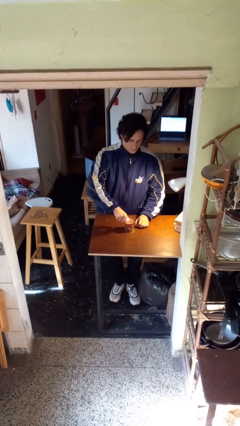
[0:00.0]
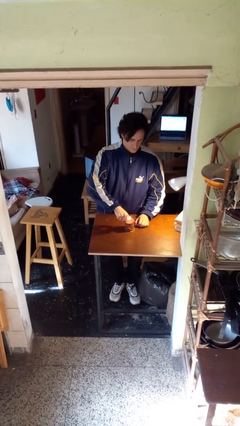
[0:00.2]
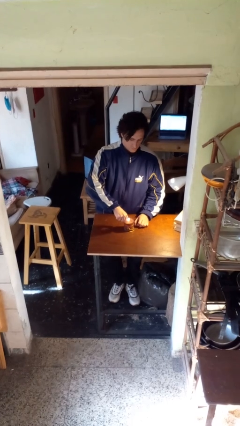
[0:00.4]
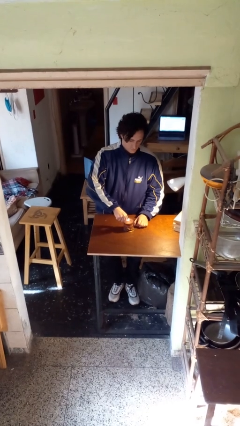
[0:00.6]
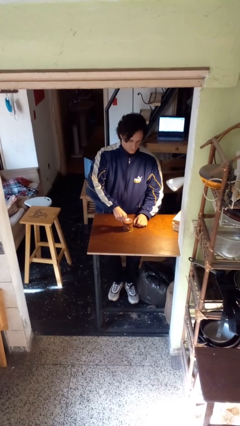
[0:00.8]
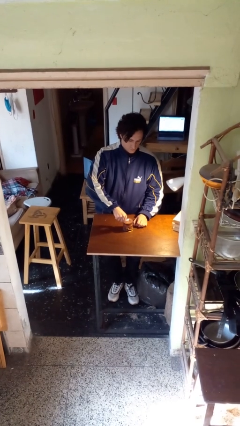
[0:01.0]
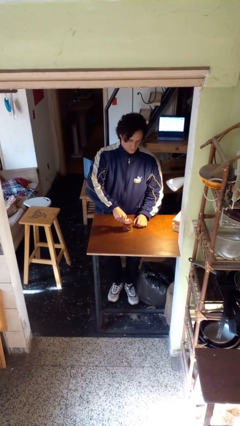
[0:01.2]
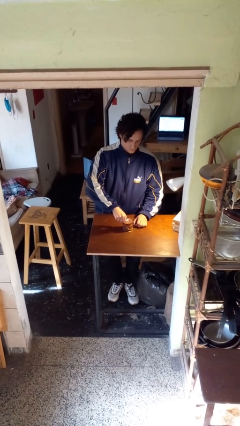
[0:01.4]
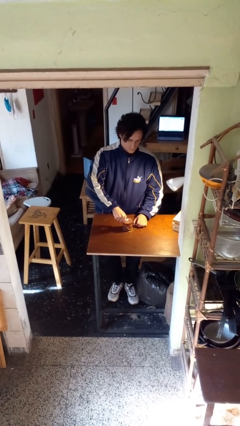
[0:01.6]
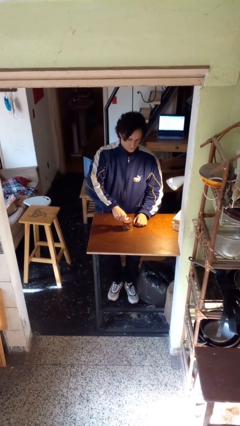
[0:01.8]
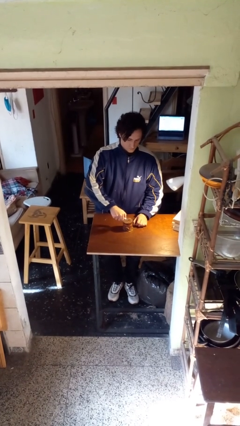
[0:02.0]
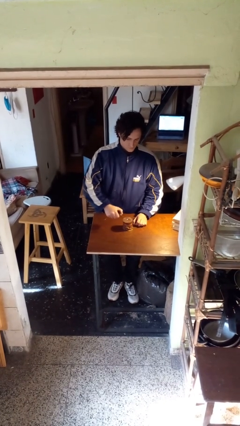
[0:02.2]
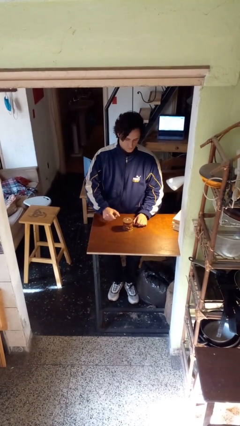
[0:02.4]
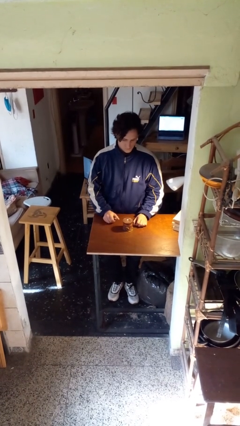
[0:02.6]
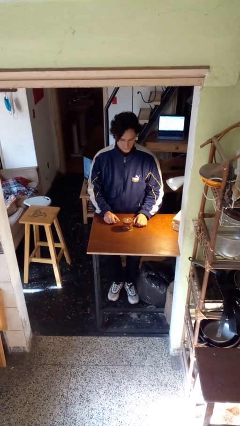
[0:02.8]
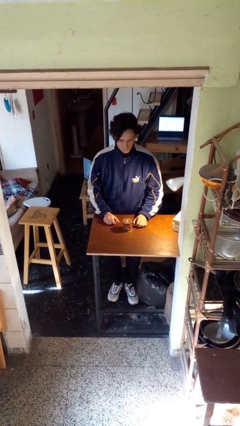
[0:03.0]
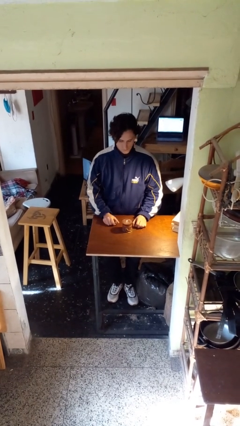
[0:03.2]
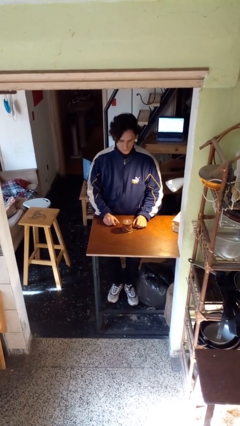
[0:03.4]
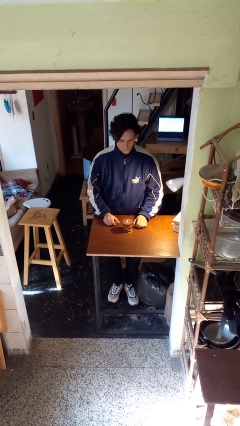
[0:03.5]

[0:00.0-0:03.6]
person lights candle

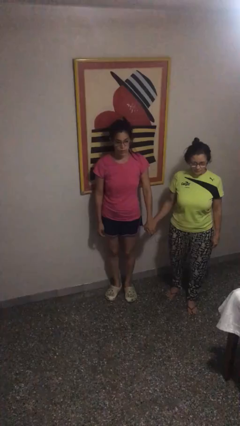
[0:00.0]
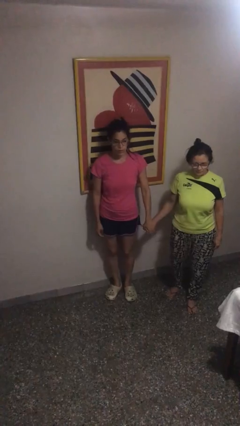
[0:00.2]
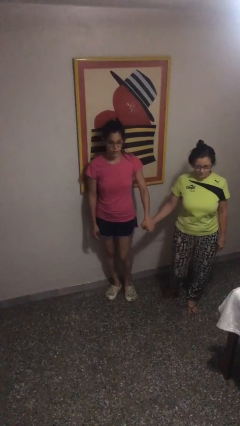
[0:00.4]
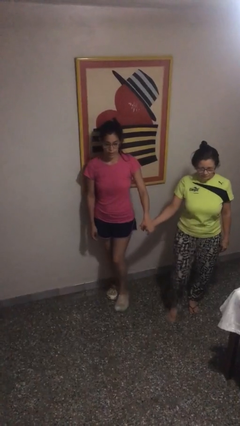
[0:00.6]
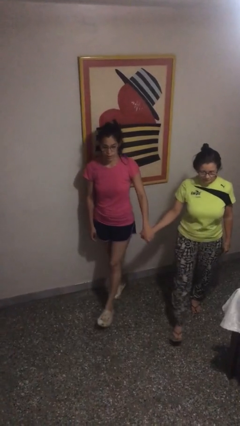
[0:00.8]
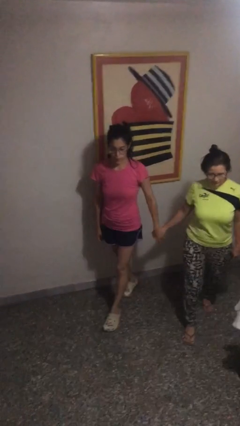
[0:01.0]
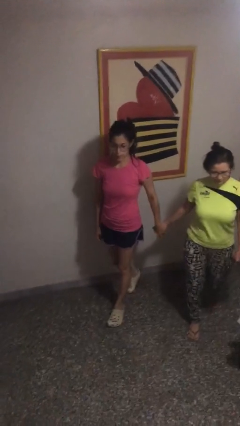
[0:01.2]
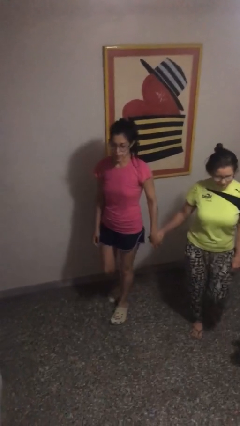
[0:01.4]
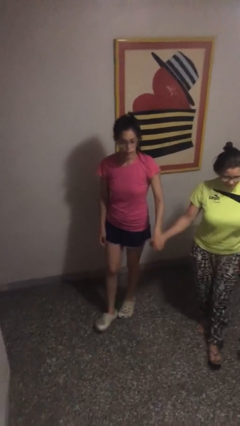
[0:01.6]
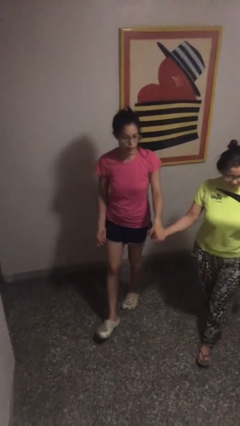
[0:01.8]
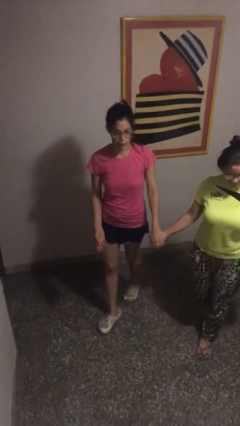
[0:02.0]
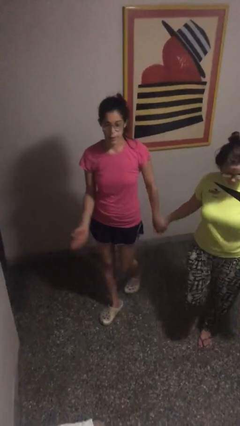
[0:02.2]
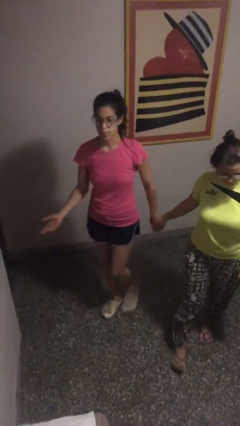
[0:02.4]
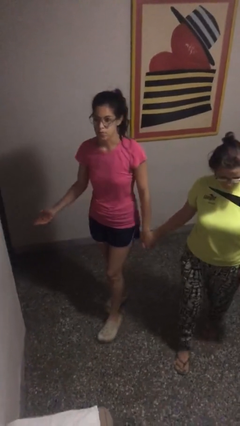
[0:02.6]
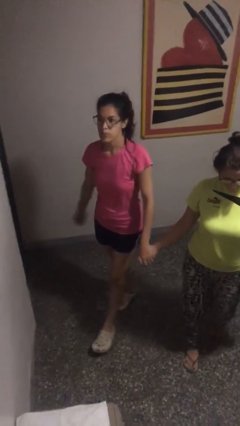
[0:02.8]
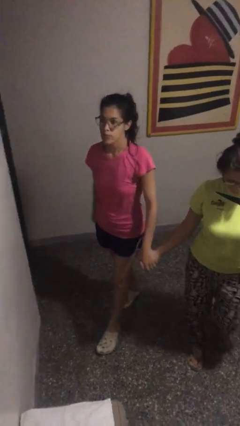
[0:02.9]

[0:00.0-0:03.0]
person holds hand

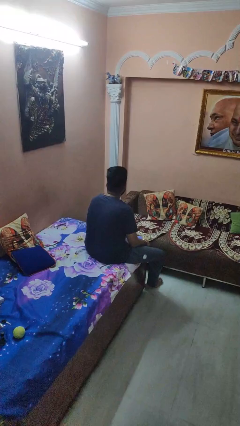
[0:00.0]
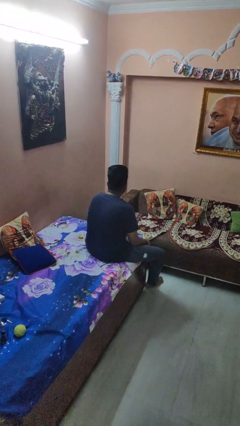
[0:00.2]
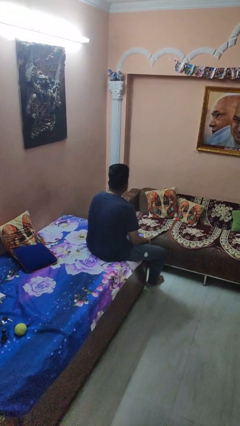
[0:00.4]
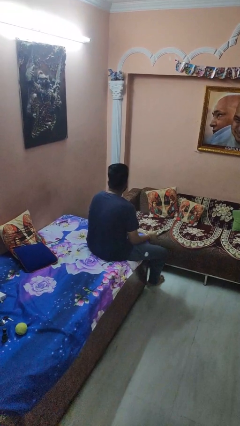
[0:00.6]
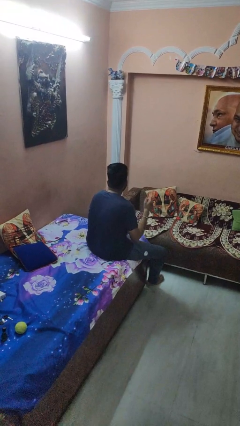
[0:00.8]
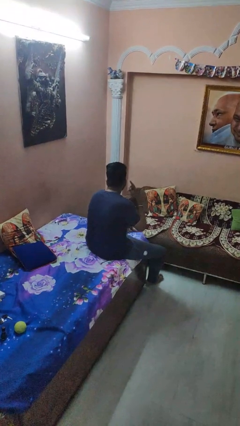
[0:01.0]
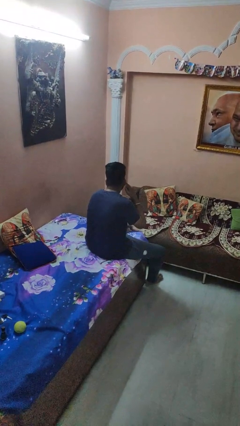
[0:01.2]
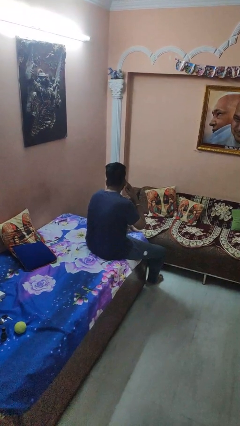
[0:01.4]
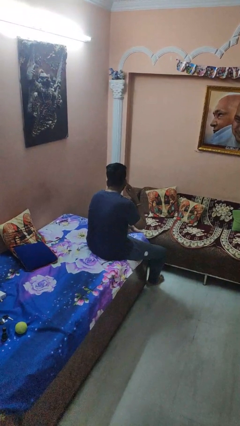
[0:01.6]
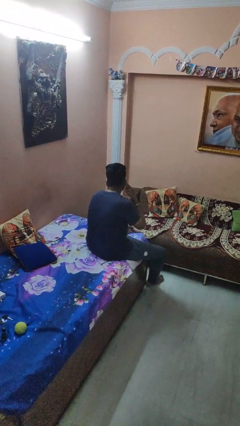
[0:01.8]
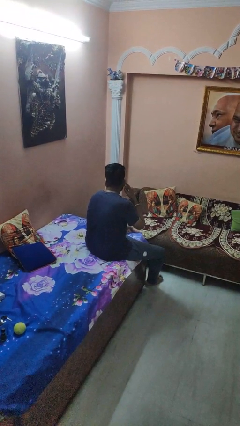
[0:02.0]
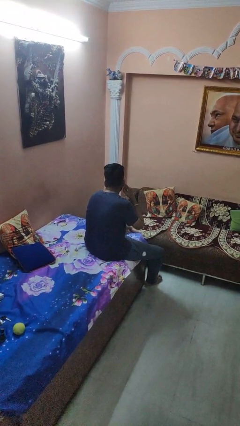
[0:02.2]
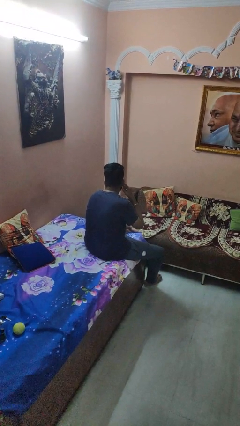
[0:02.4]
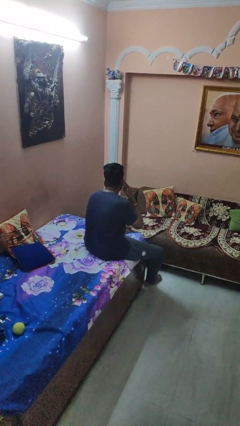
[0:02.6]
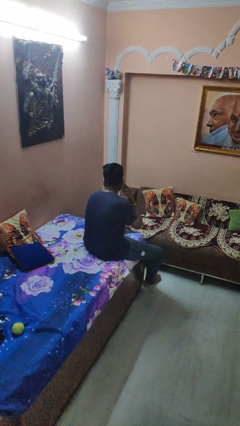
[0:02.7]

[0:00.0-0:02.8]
person gestures listen closely

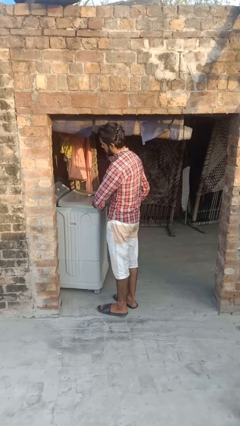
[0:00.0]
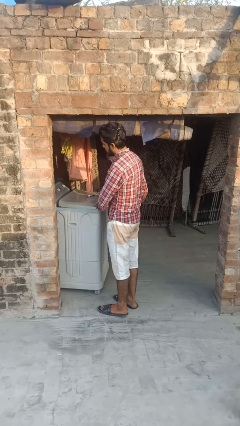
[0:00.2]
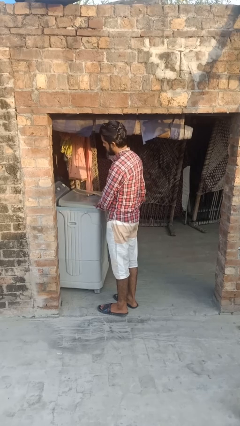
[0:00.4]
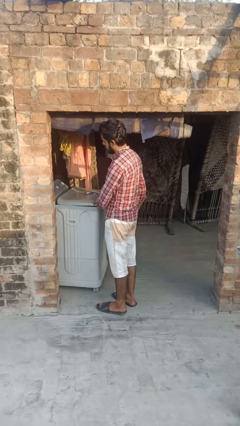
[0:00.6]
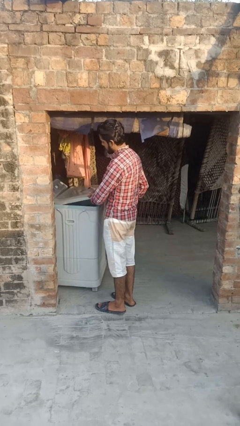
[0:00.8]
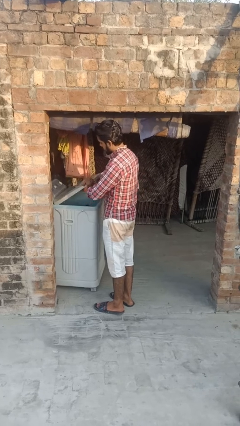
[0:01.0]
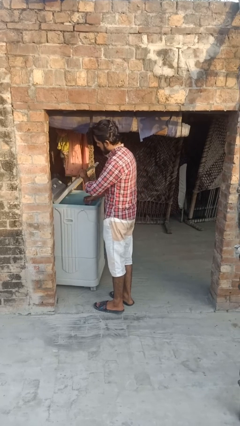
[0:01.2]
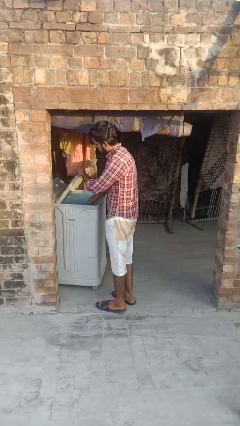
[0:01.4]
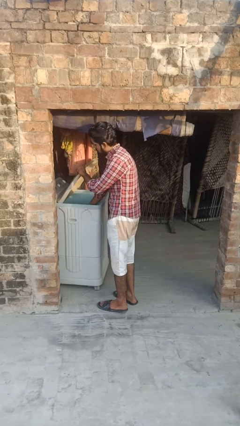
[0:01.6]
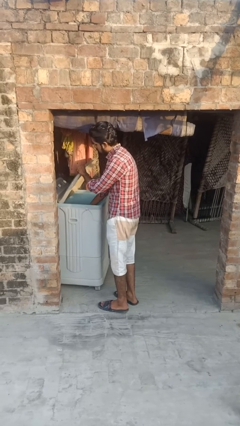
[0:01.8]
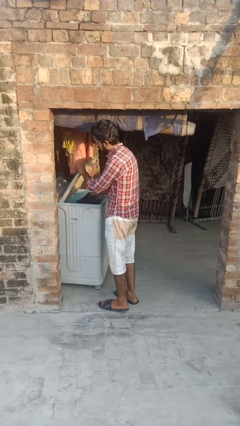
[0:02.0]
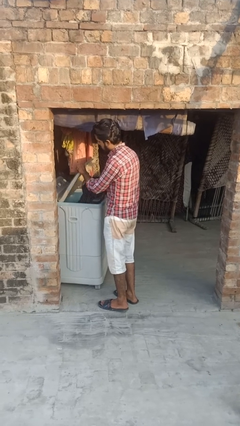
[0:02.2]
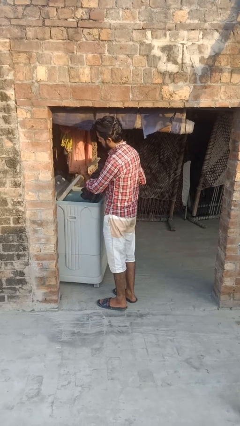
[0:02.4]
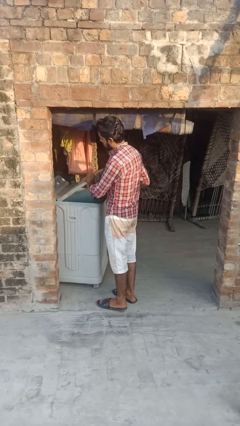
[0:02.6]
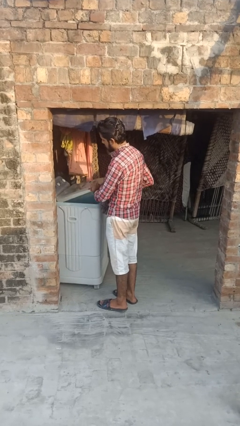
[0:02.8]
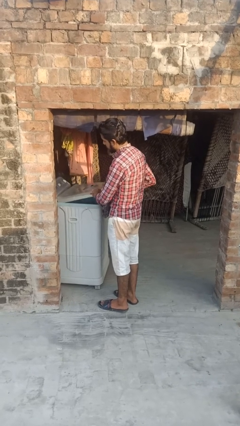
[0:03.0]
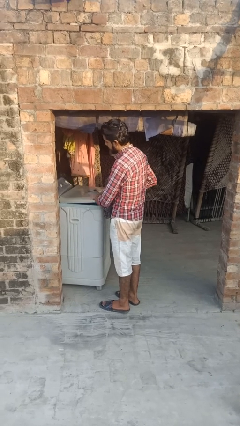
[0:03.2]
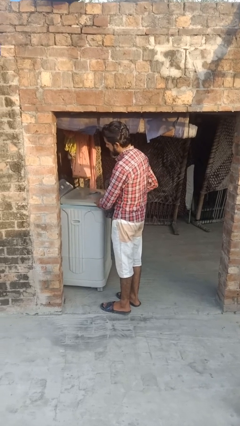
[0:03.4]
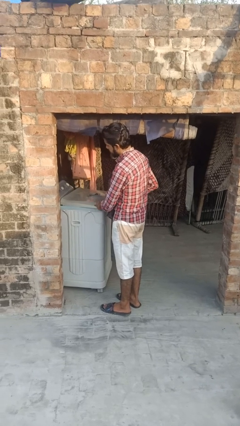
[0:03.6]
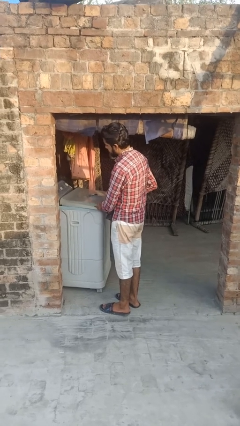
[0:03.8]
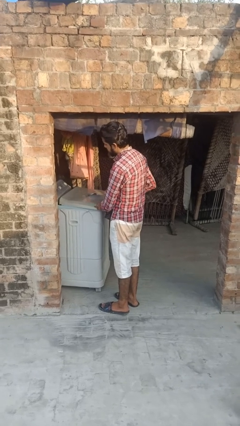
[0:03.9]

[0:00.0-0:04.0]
person unloads clotheswasher

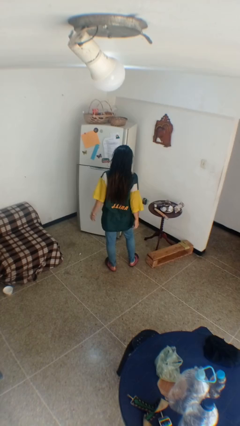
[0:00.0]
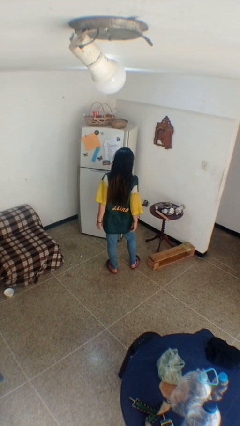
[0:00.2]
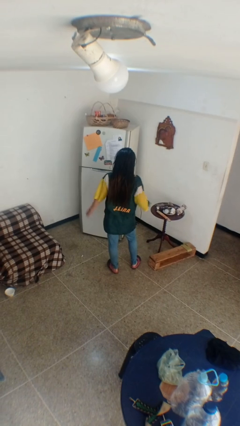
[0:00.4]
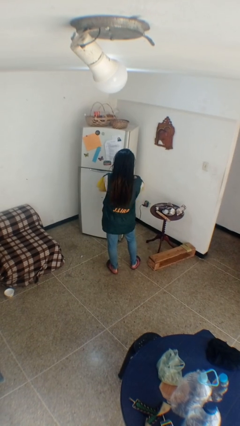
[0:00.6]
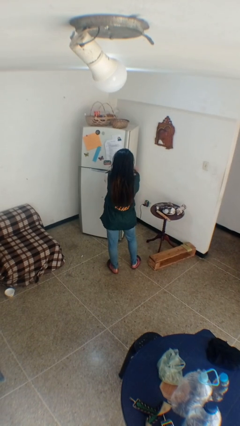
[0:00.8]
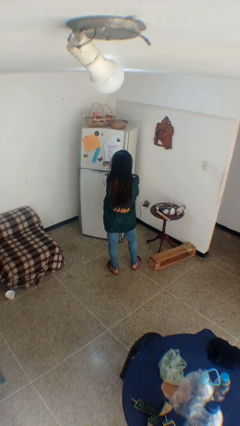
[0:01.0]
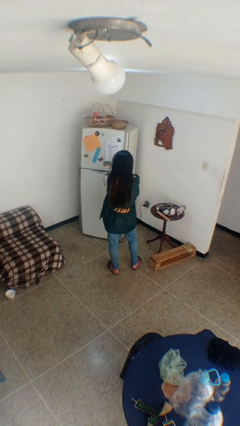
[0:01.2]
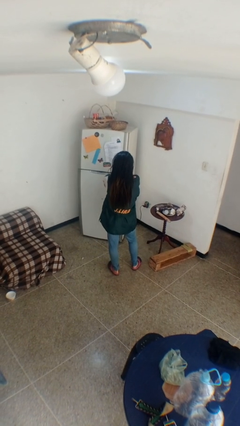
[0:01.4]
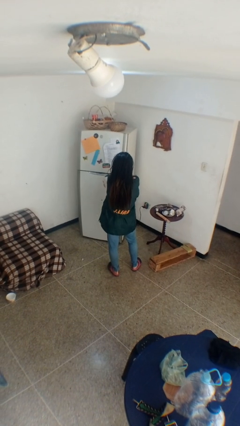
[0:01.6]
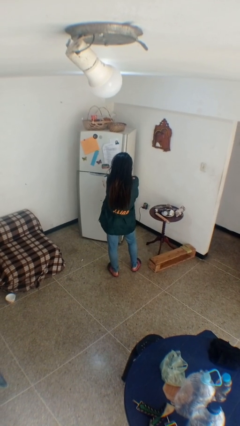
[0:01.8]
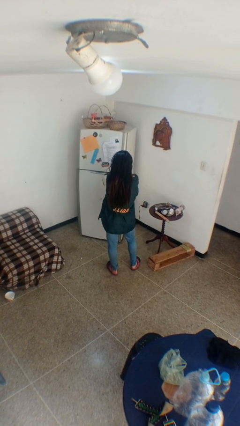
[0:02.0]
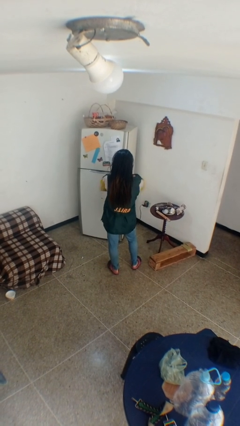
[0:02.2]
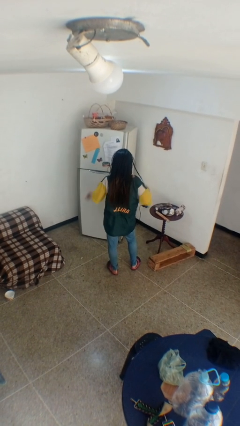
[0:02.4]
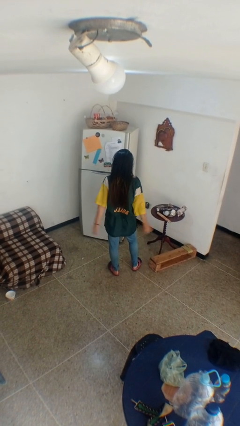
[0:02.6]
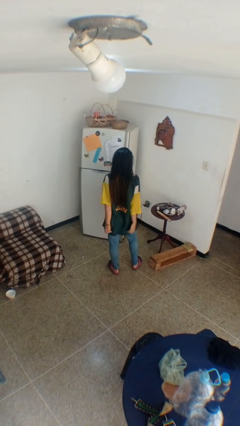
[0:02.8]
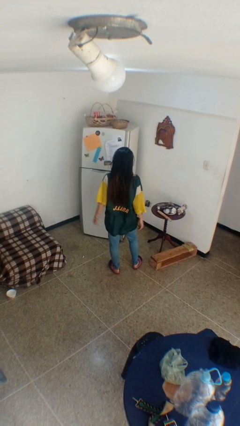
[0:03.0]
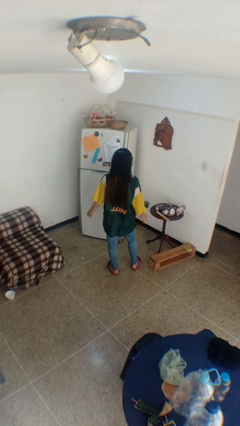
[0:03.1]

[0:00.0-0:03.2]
person gestures arms x

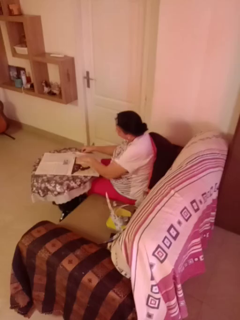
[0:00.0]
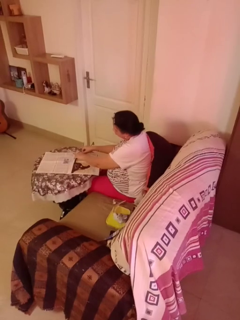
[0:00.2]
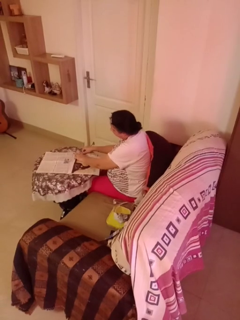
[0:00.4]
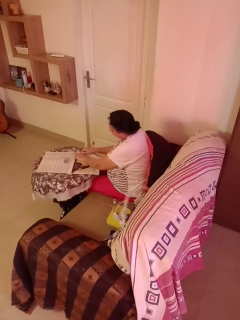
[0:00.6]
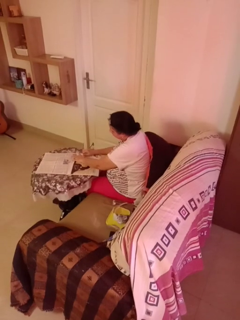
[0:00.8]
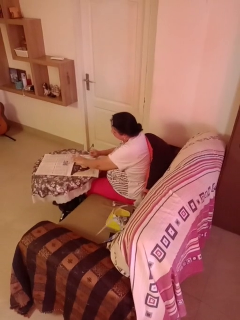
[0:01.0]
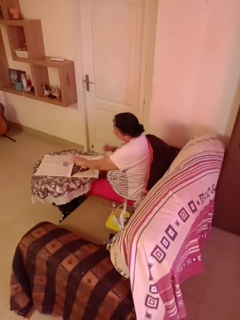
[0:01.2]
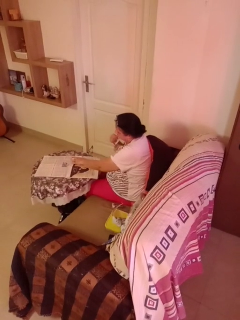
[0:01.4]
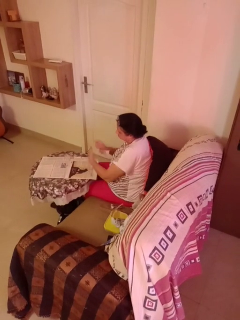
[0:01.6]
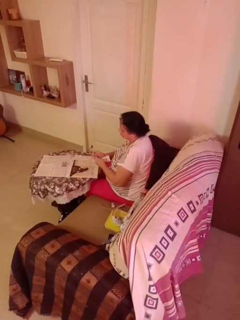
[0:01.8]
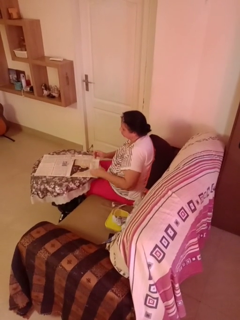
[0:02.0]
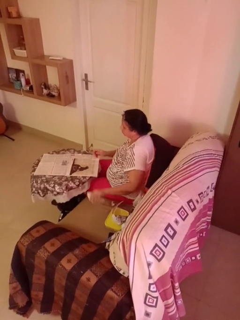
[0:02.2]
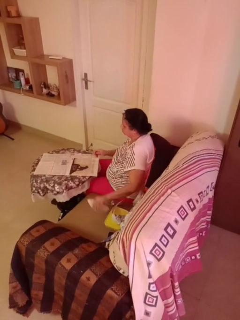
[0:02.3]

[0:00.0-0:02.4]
person tears paper
